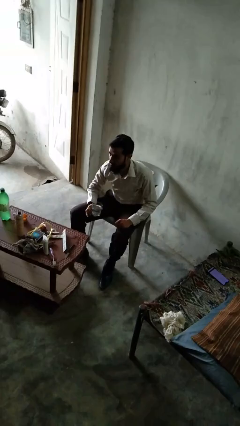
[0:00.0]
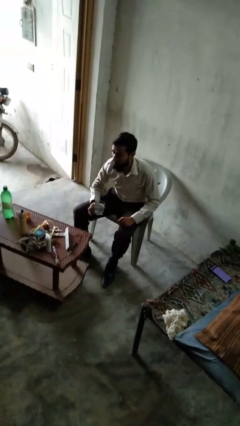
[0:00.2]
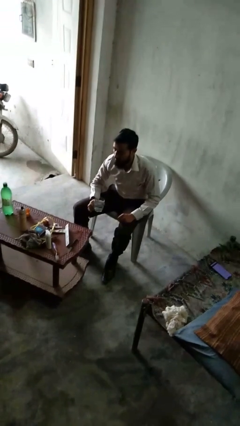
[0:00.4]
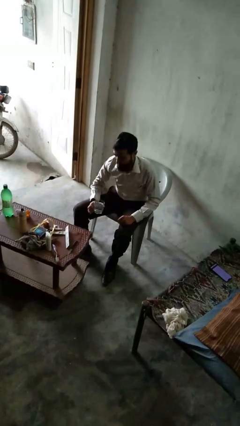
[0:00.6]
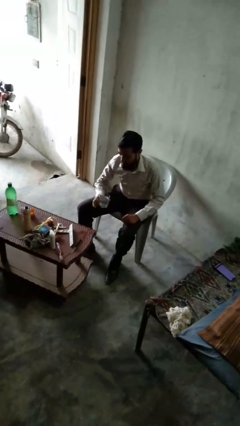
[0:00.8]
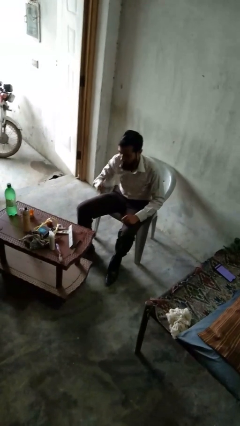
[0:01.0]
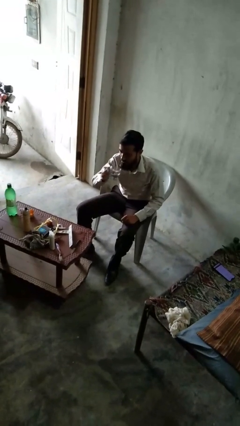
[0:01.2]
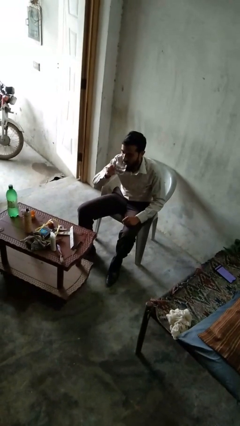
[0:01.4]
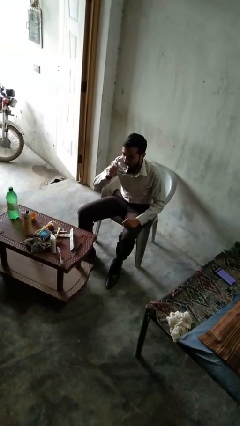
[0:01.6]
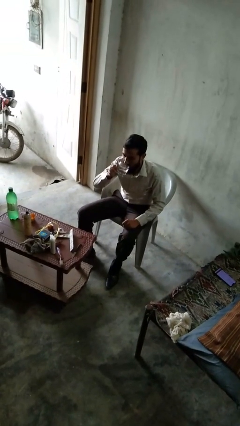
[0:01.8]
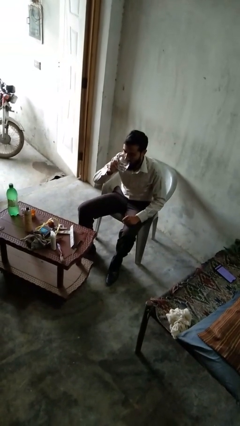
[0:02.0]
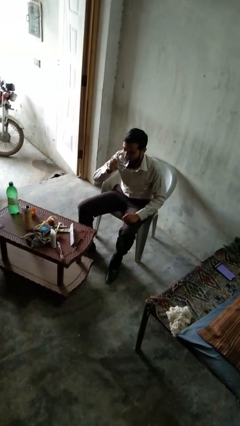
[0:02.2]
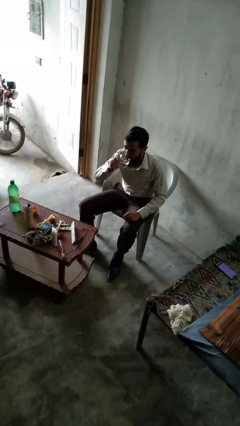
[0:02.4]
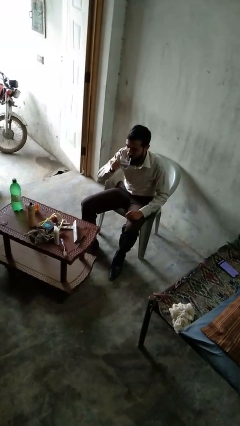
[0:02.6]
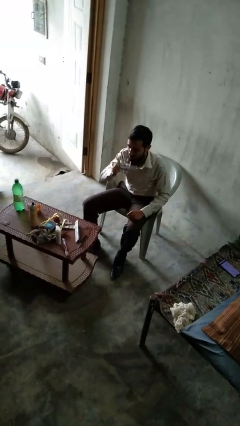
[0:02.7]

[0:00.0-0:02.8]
person drinks from shotglass

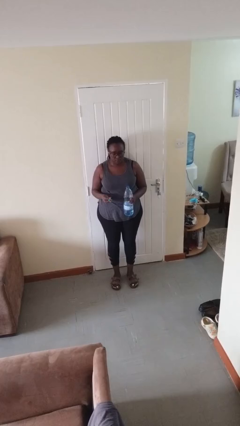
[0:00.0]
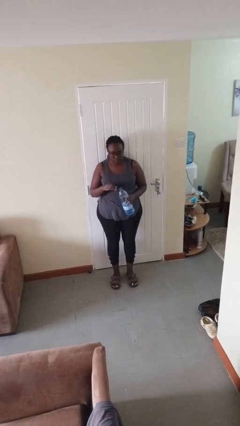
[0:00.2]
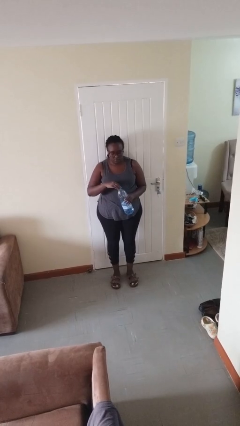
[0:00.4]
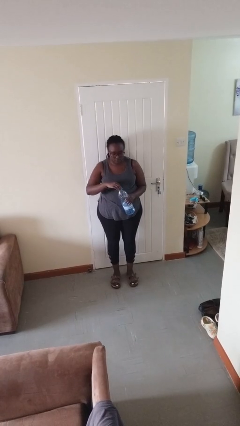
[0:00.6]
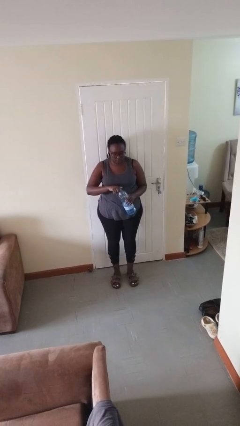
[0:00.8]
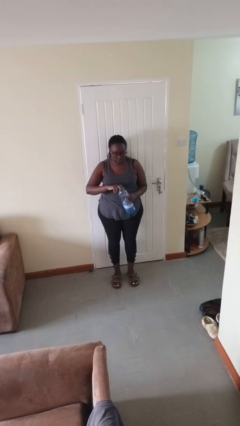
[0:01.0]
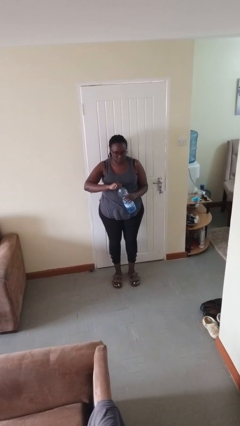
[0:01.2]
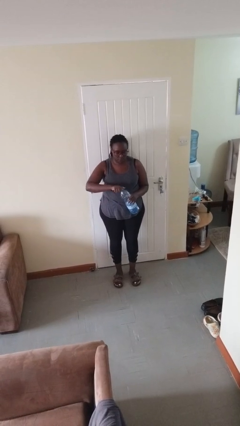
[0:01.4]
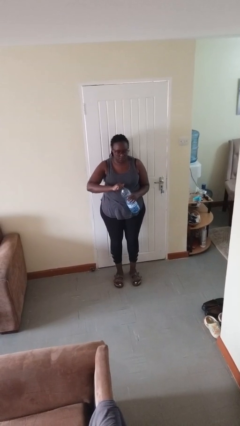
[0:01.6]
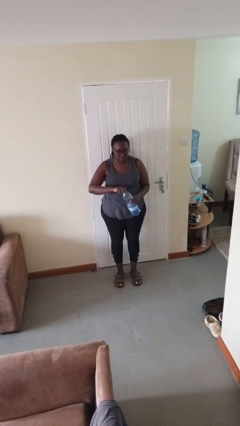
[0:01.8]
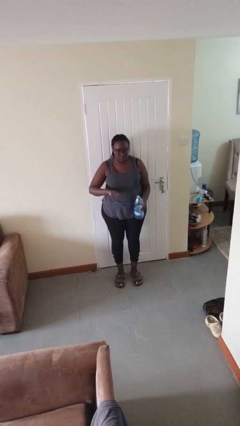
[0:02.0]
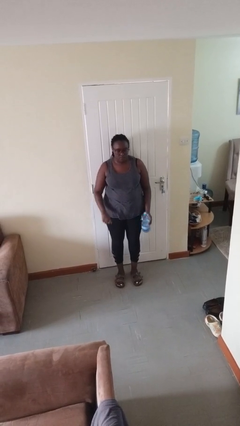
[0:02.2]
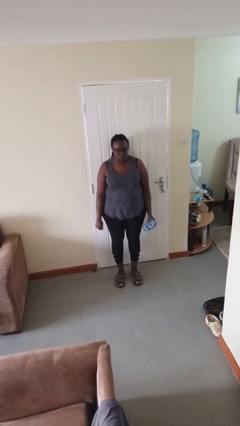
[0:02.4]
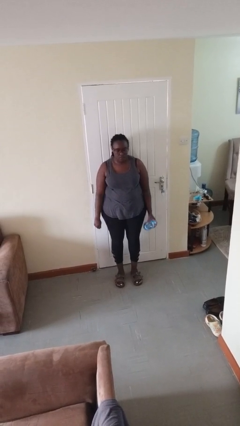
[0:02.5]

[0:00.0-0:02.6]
person screws lid to bottle

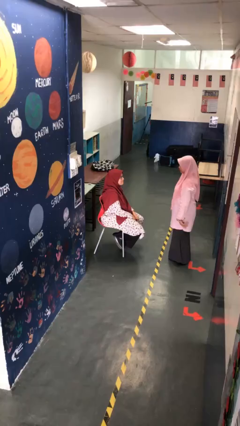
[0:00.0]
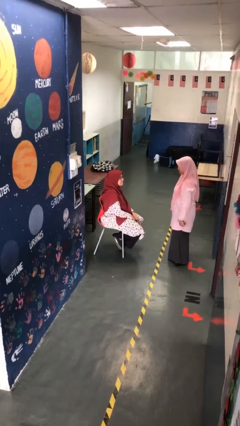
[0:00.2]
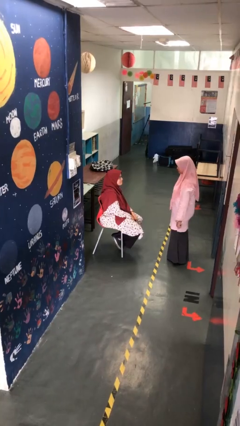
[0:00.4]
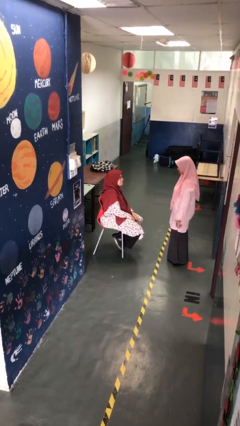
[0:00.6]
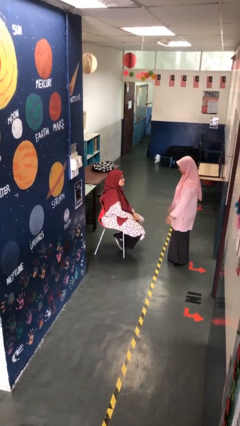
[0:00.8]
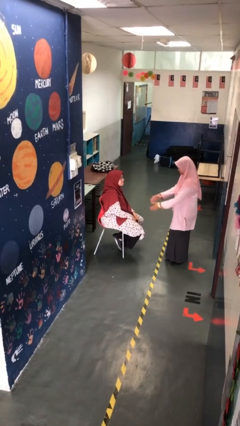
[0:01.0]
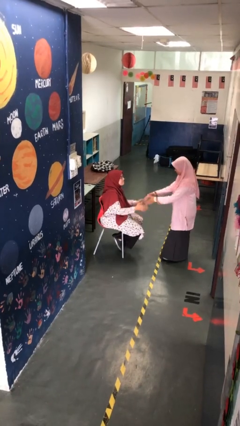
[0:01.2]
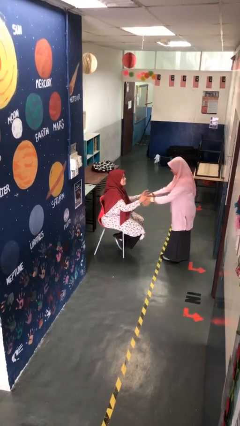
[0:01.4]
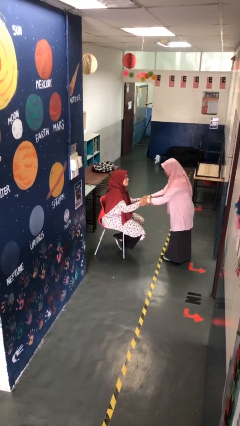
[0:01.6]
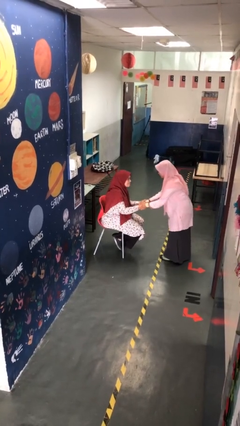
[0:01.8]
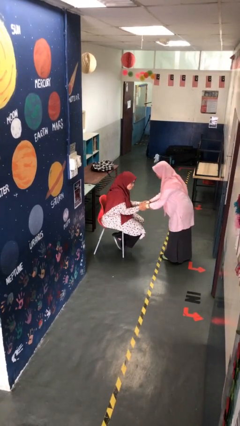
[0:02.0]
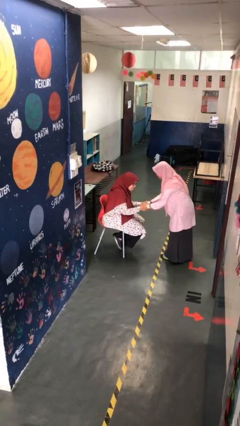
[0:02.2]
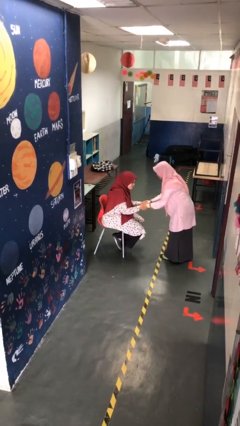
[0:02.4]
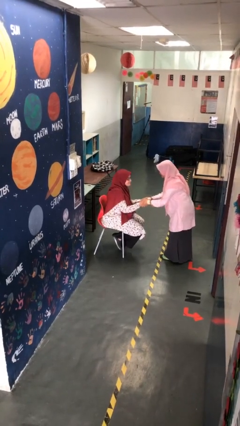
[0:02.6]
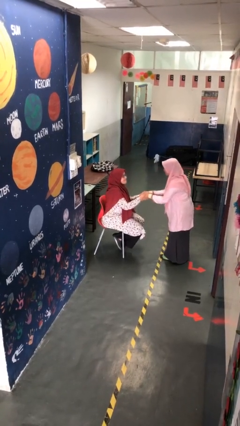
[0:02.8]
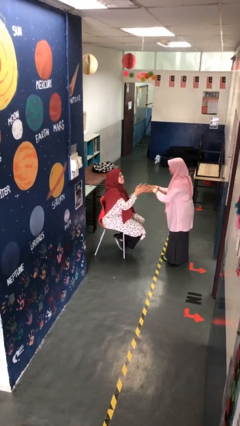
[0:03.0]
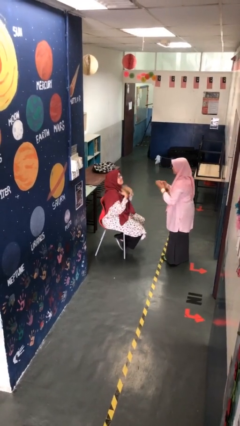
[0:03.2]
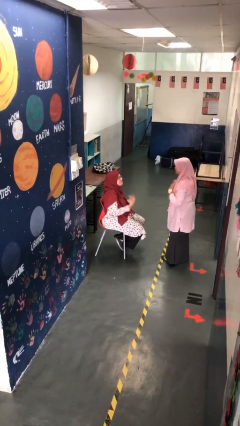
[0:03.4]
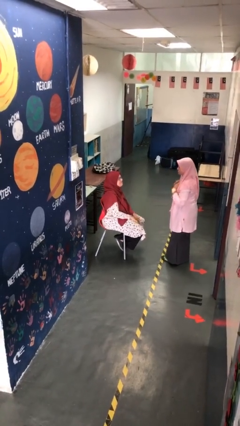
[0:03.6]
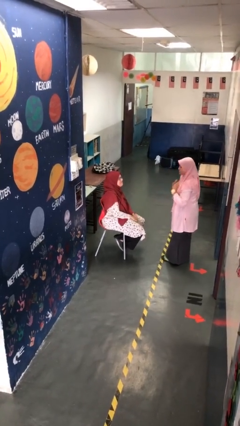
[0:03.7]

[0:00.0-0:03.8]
person shakes hand

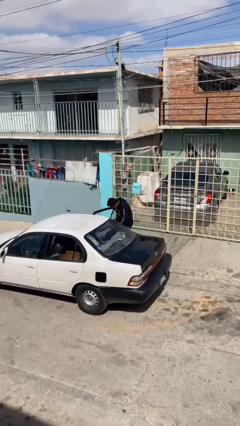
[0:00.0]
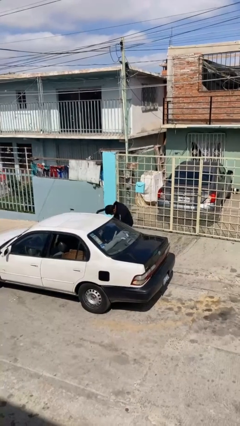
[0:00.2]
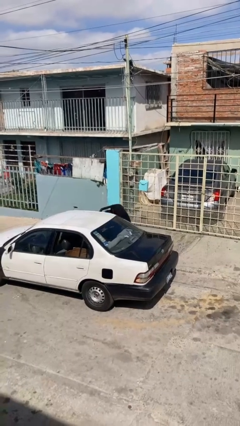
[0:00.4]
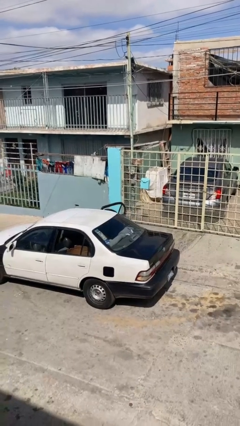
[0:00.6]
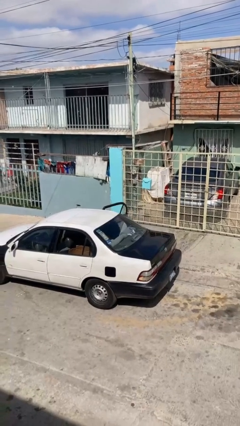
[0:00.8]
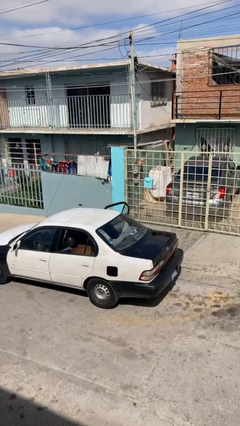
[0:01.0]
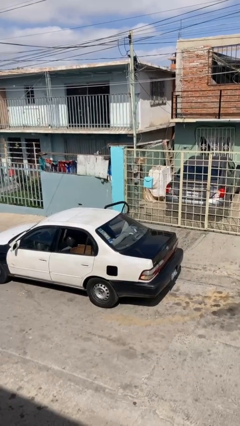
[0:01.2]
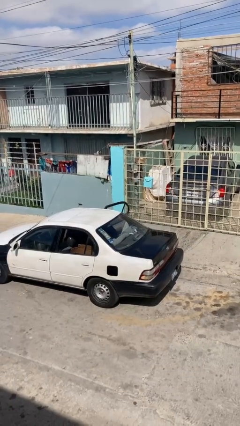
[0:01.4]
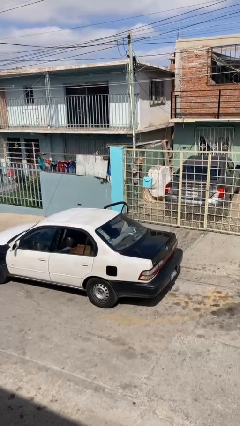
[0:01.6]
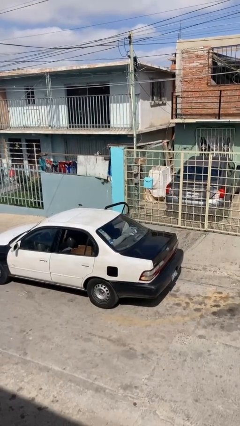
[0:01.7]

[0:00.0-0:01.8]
person enters car

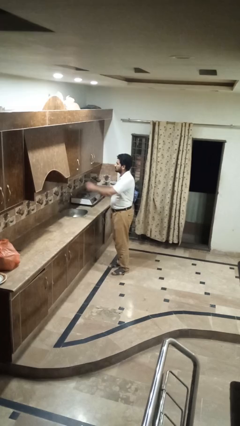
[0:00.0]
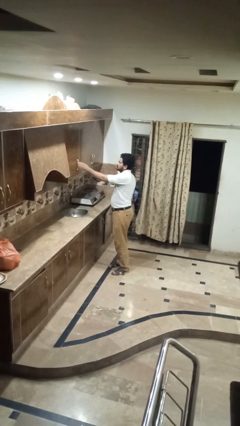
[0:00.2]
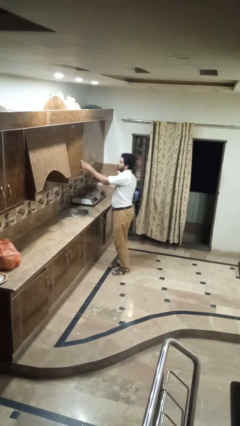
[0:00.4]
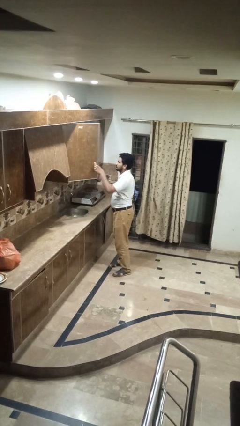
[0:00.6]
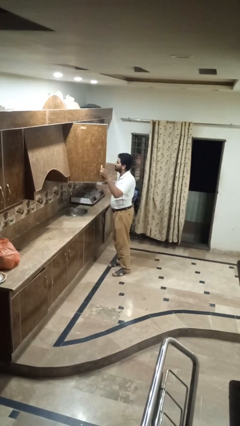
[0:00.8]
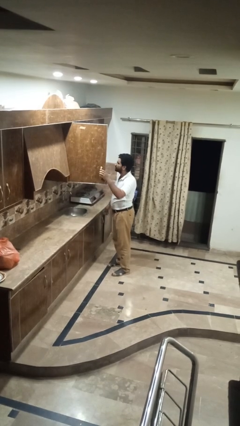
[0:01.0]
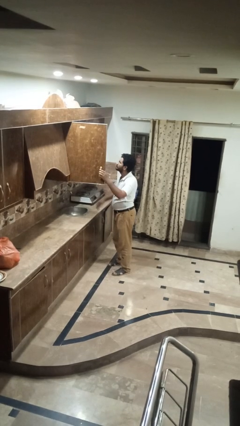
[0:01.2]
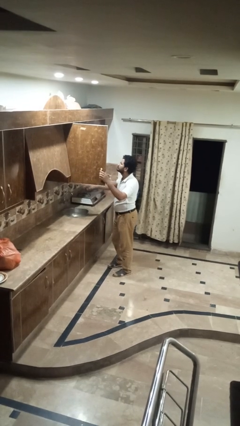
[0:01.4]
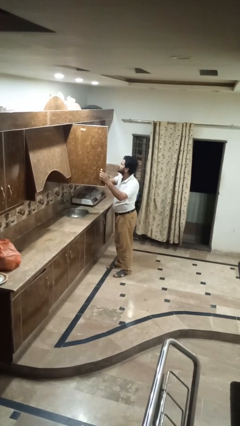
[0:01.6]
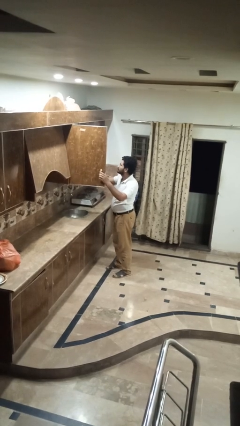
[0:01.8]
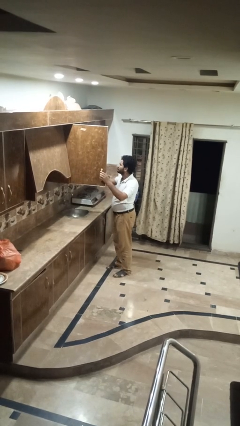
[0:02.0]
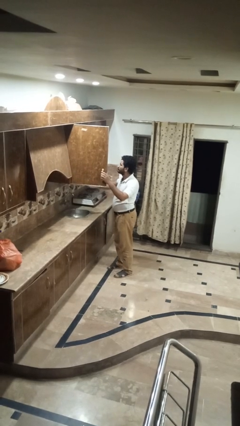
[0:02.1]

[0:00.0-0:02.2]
person opens kitchen drawer

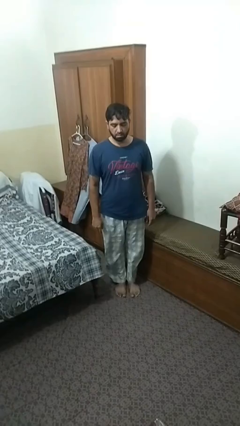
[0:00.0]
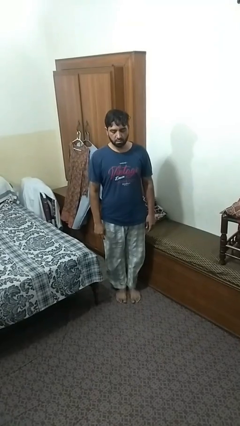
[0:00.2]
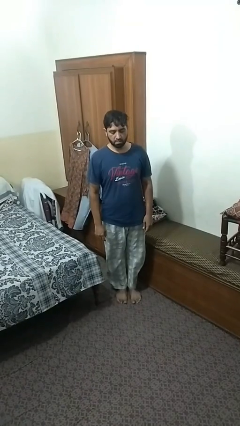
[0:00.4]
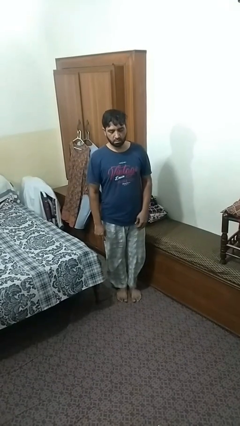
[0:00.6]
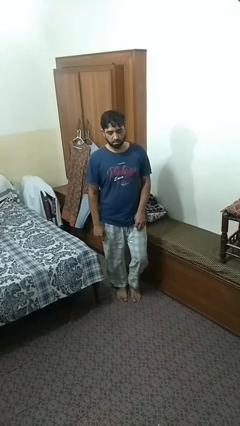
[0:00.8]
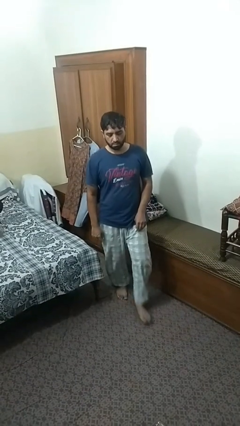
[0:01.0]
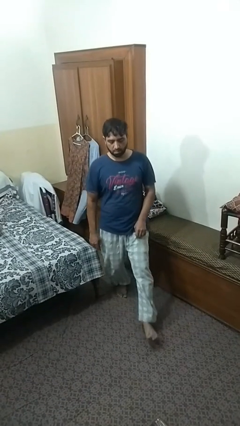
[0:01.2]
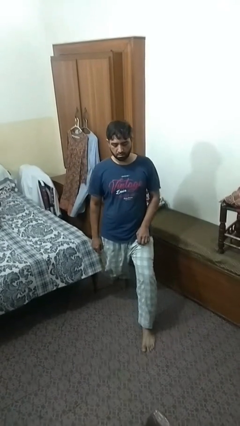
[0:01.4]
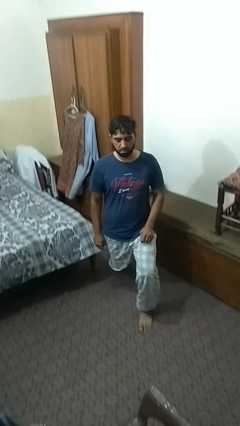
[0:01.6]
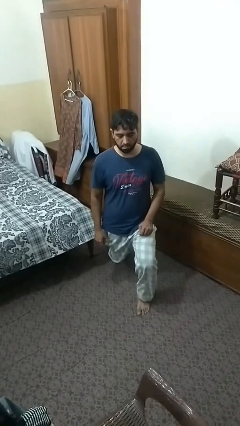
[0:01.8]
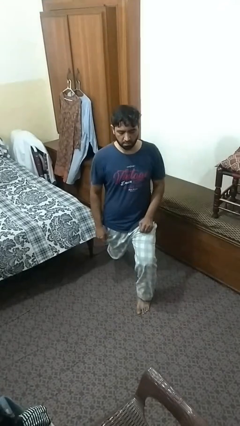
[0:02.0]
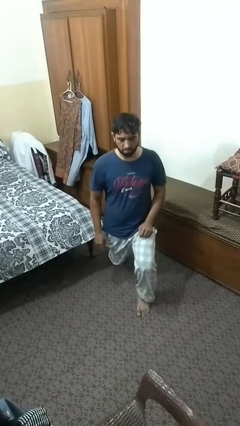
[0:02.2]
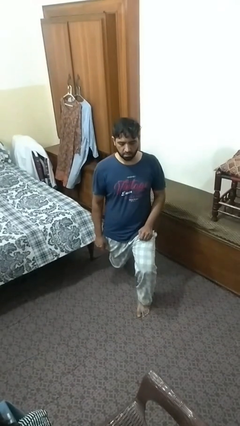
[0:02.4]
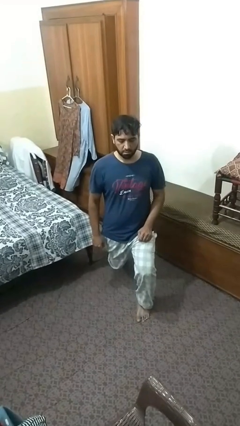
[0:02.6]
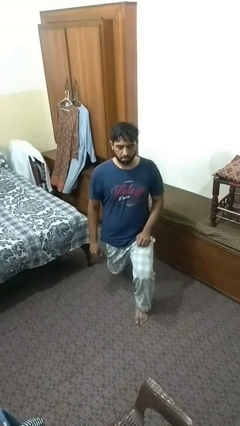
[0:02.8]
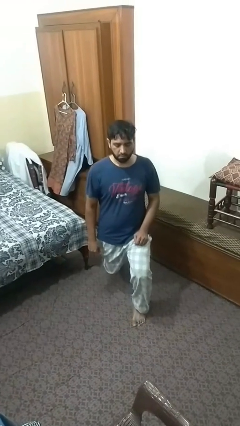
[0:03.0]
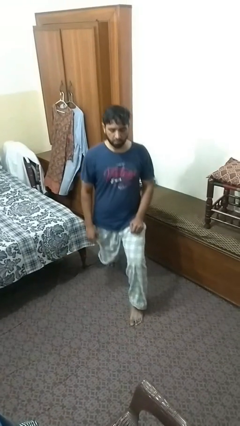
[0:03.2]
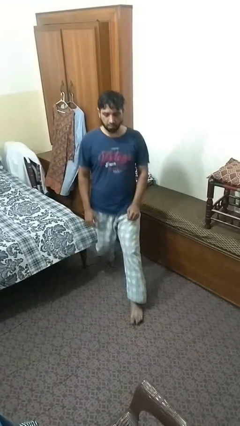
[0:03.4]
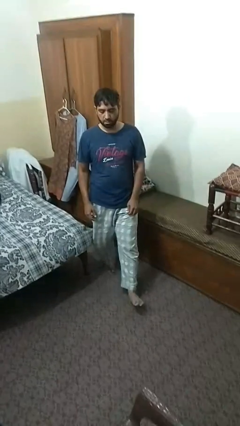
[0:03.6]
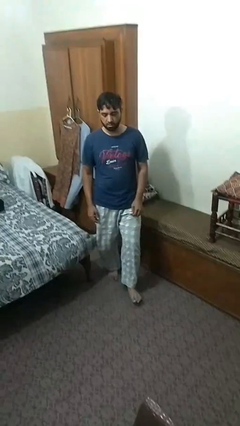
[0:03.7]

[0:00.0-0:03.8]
person exercises with lunges

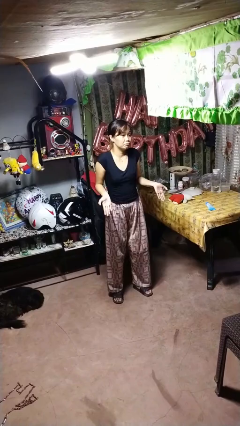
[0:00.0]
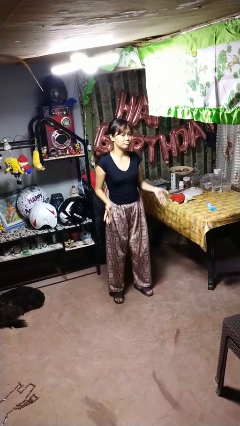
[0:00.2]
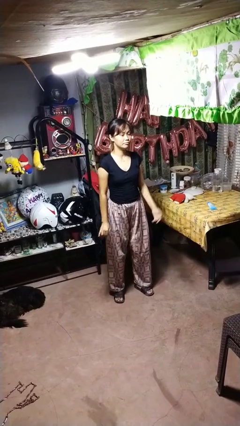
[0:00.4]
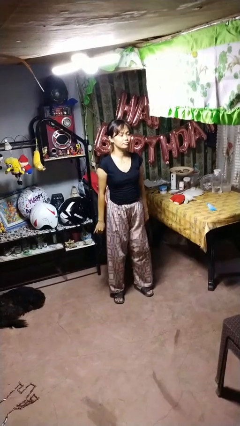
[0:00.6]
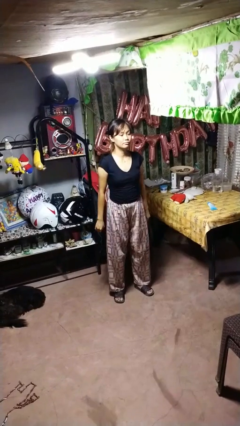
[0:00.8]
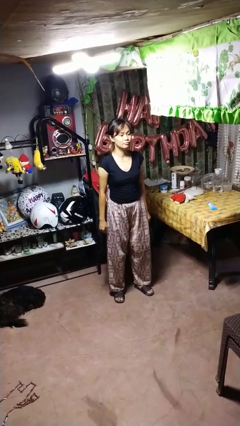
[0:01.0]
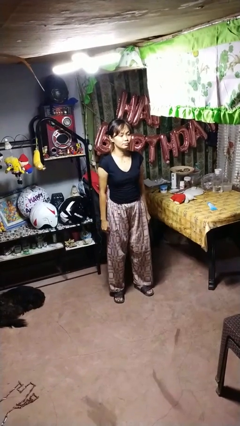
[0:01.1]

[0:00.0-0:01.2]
person shrugs
